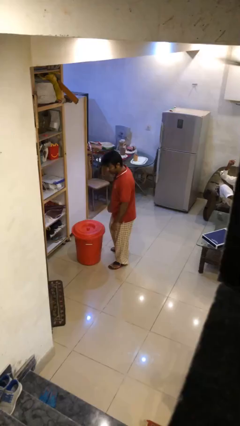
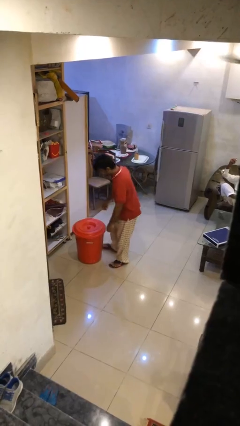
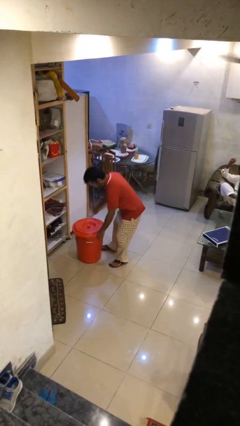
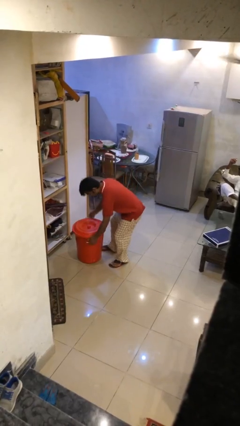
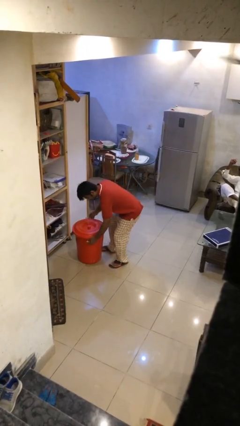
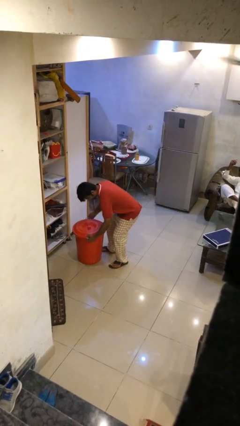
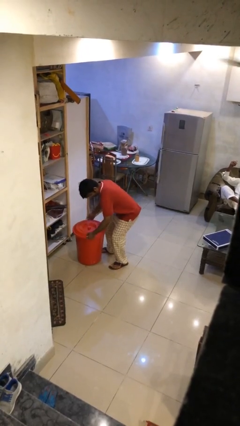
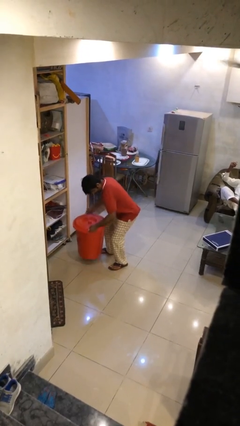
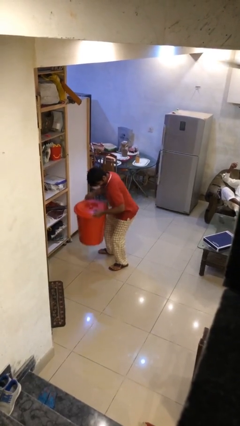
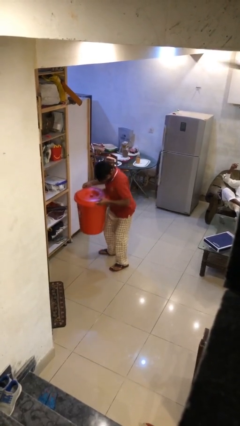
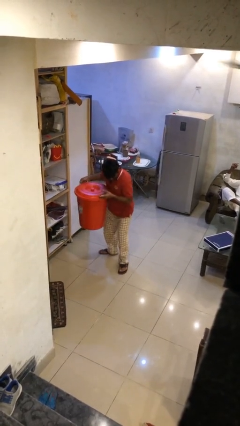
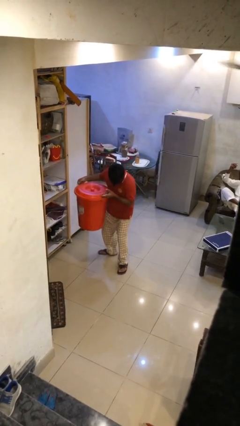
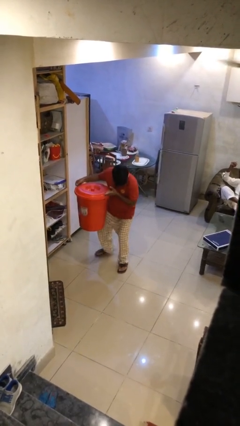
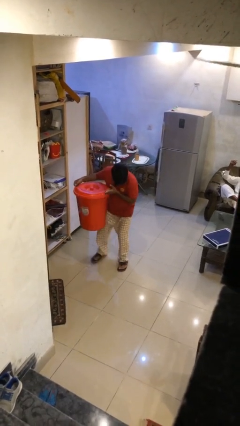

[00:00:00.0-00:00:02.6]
person picks up object from floor

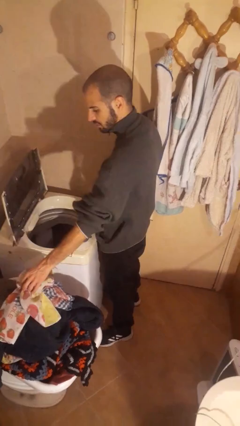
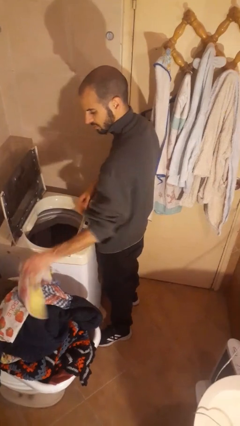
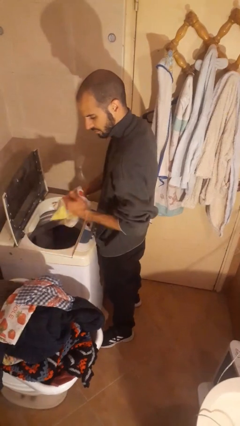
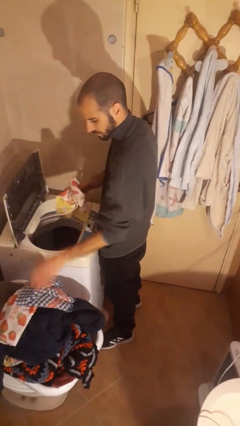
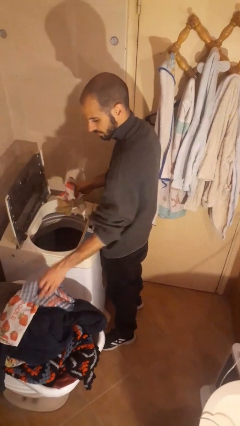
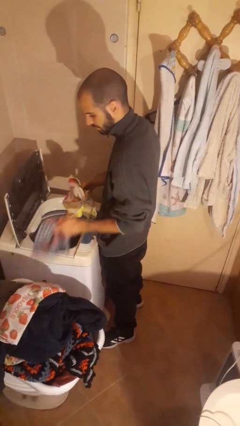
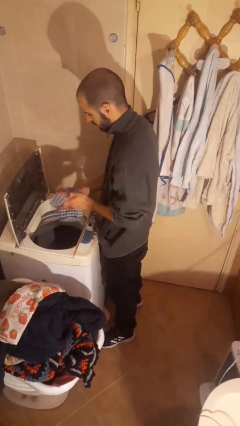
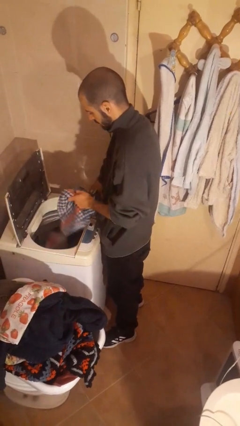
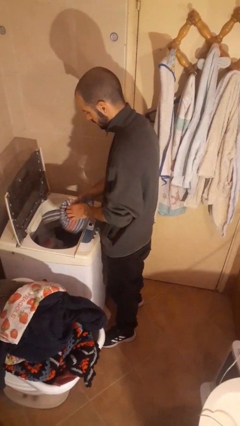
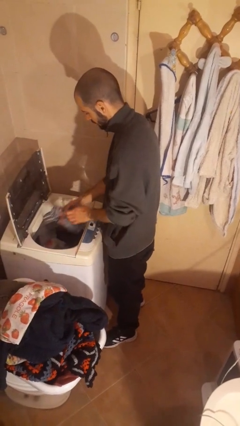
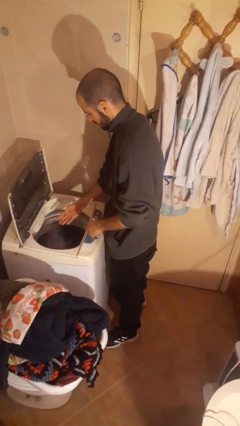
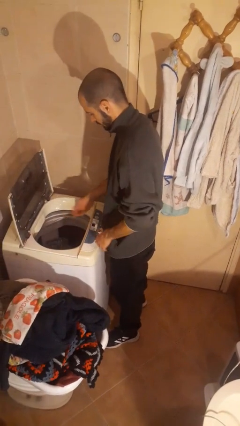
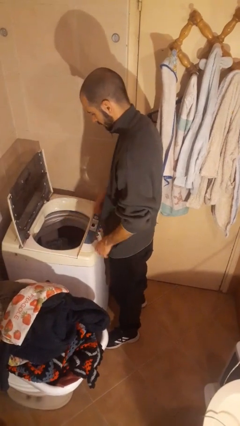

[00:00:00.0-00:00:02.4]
person unloads clotheswasher

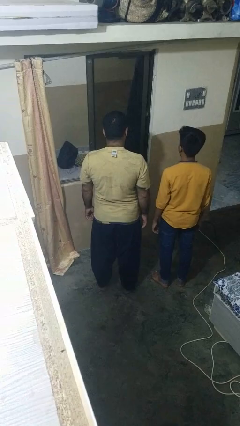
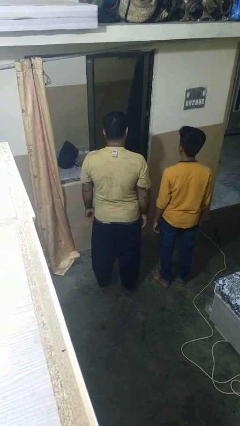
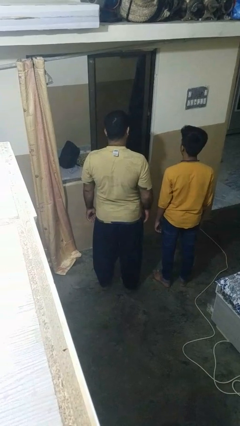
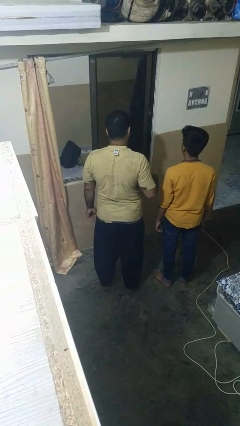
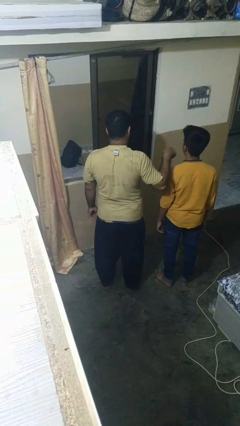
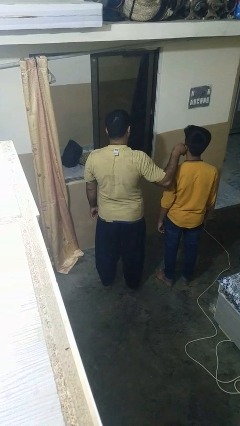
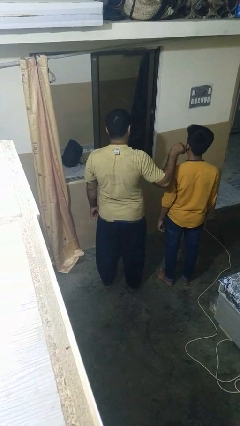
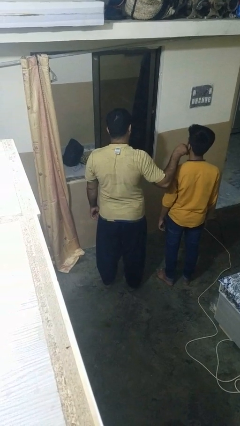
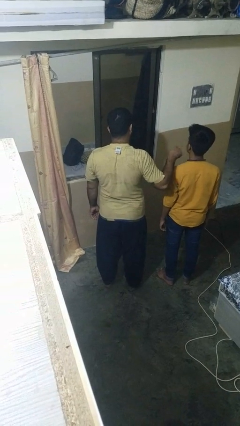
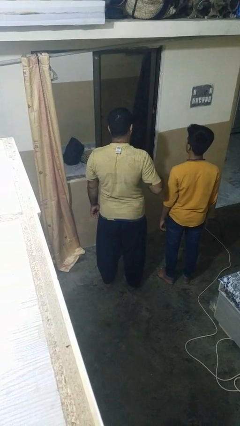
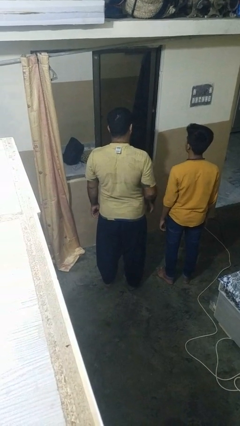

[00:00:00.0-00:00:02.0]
person touches face of person

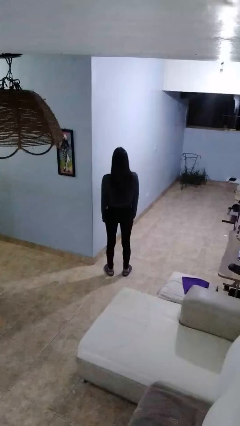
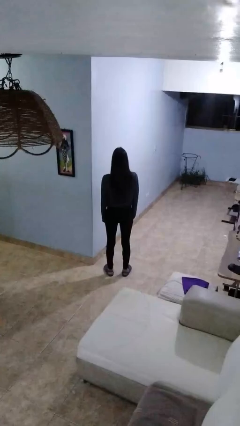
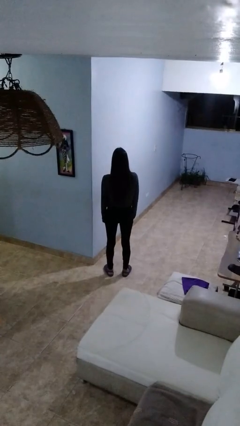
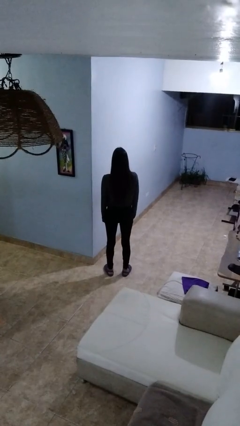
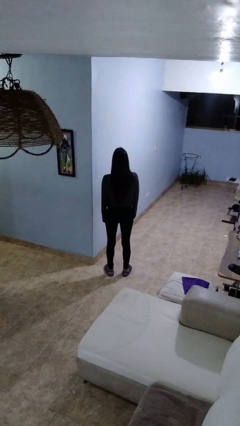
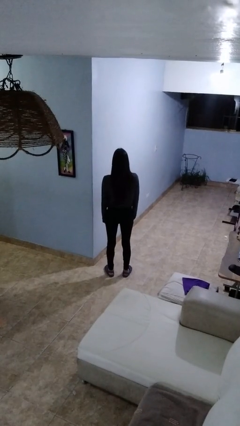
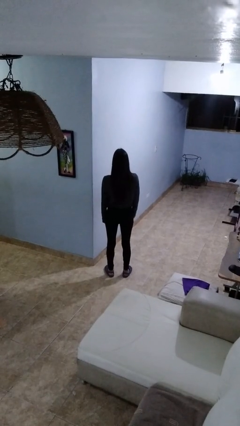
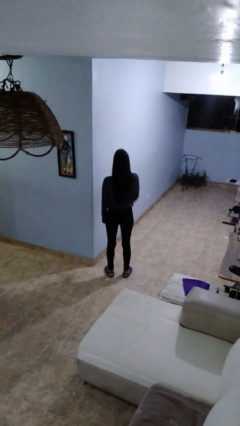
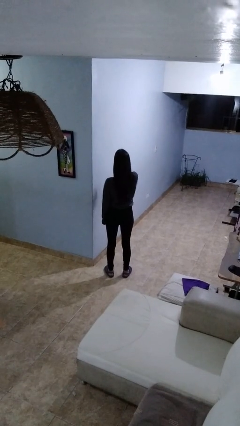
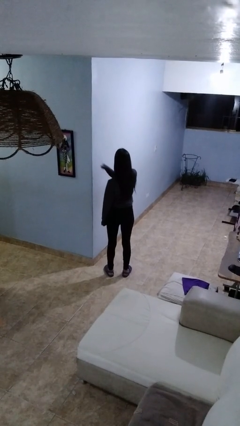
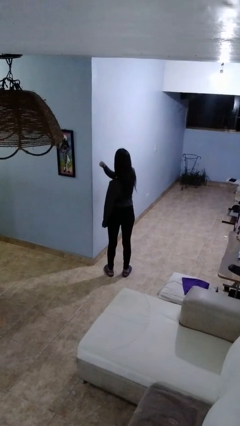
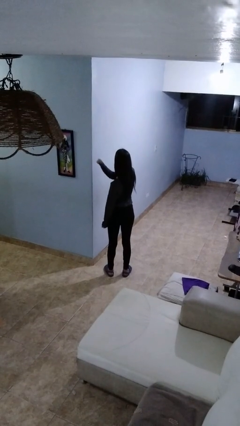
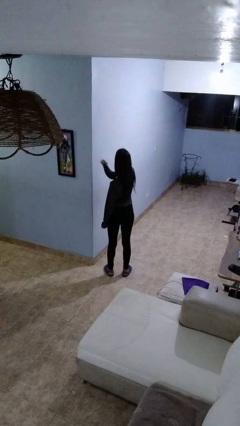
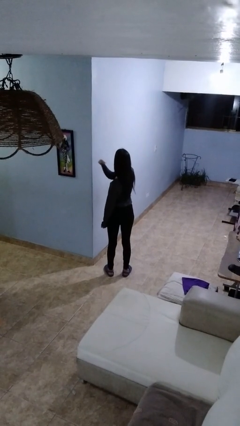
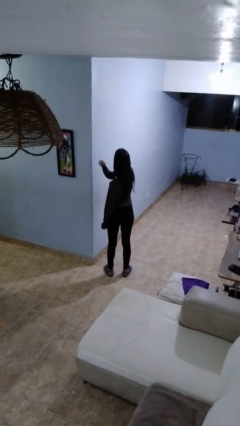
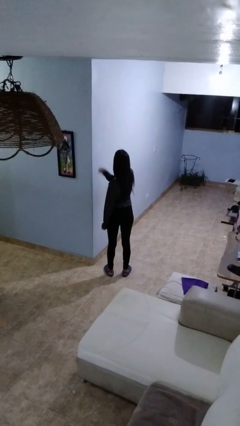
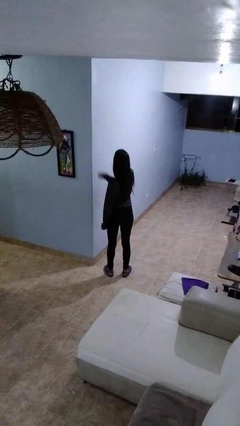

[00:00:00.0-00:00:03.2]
person gestures behind me

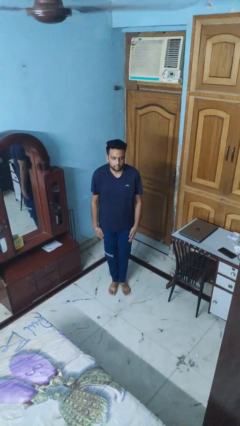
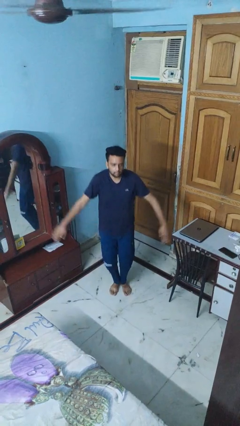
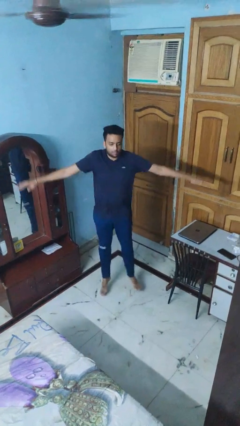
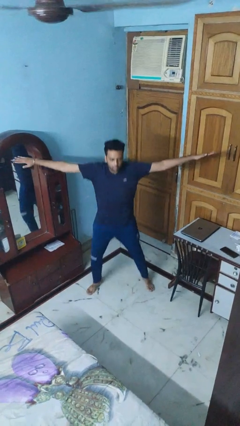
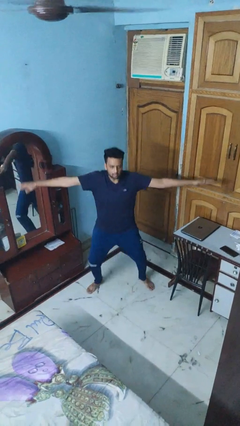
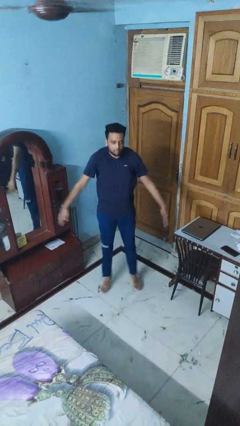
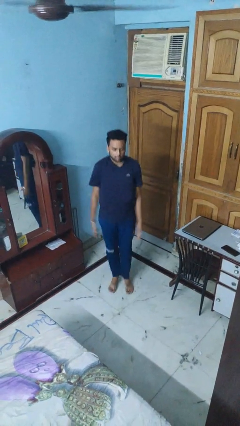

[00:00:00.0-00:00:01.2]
person exercises with jumping jacks

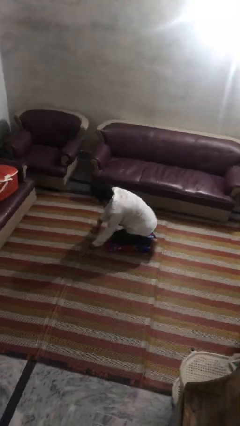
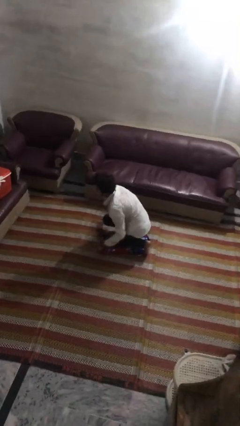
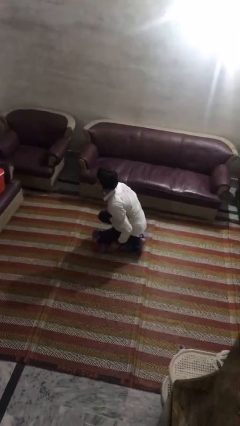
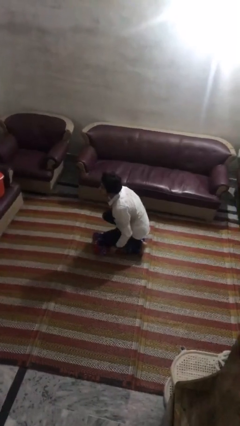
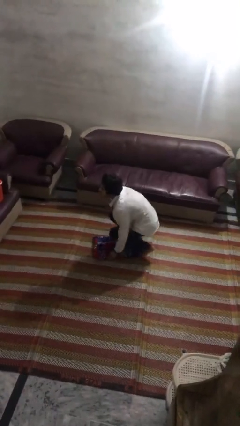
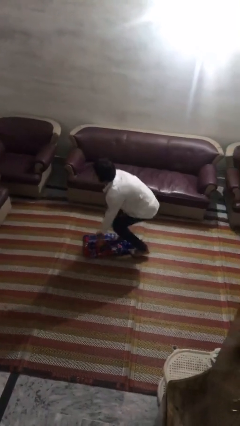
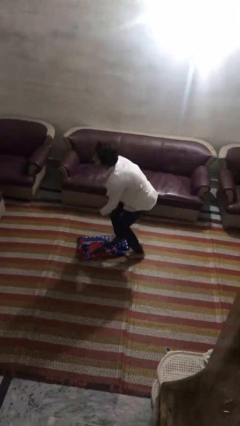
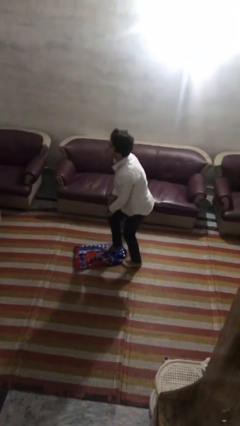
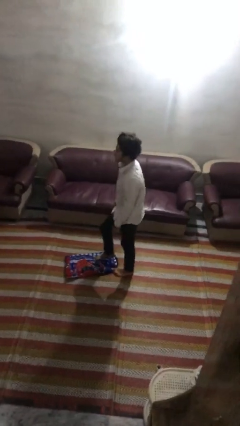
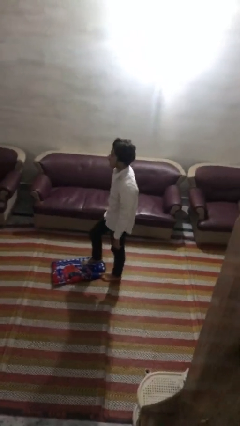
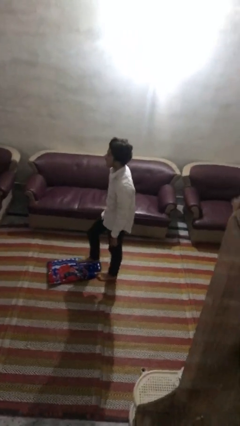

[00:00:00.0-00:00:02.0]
person stands up from floor

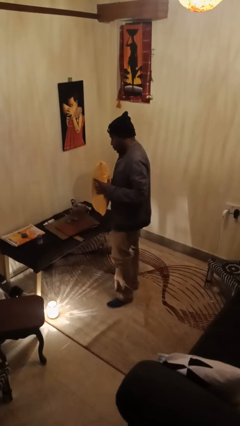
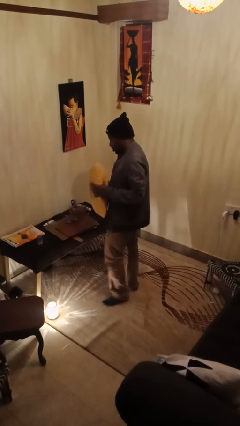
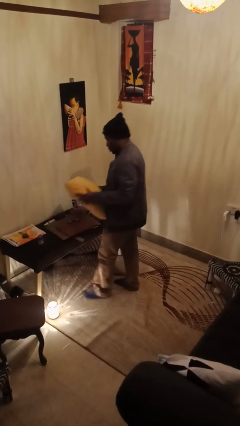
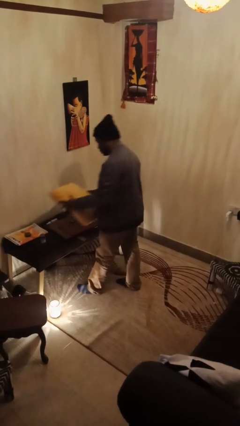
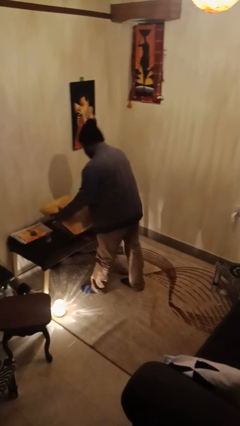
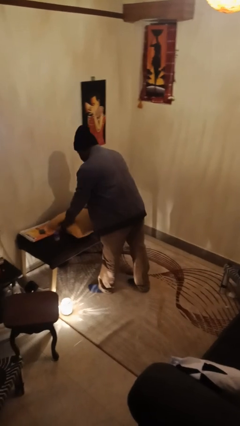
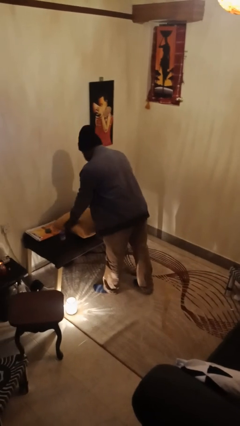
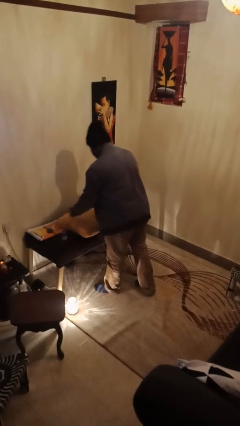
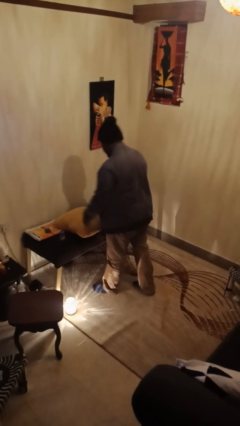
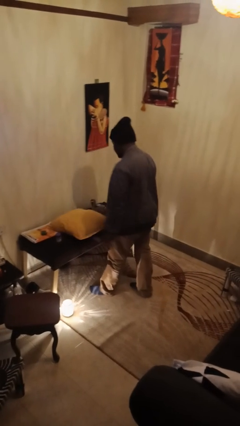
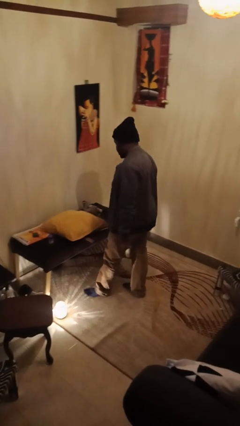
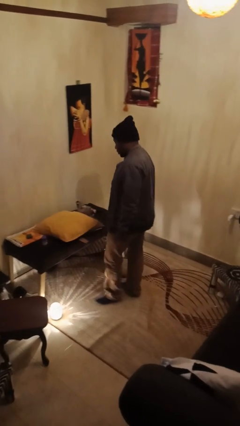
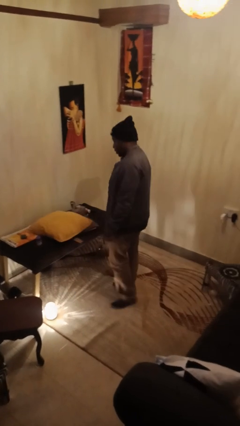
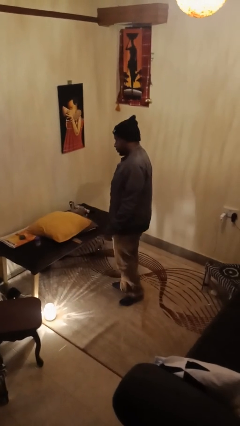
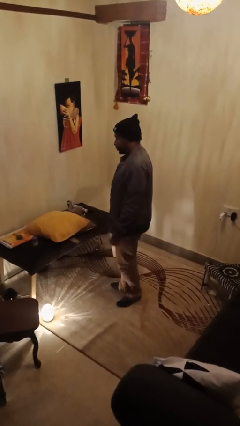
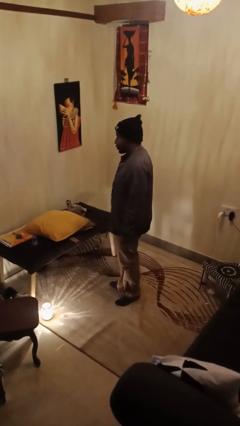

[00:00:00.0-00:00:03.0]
person puts down object on countertop

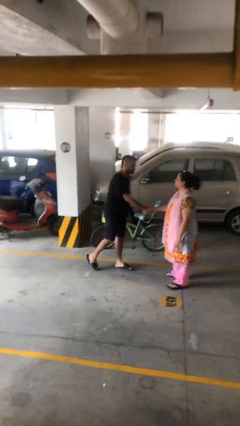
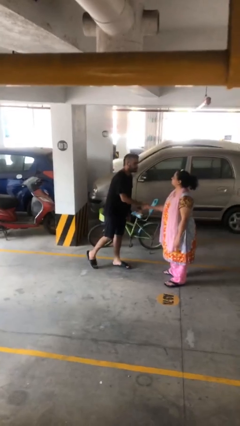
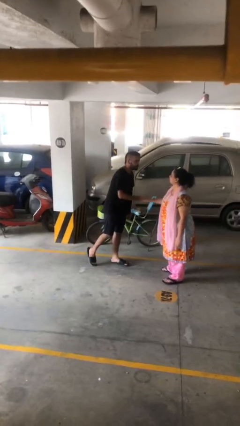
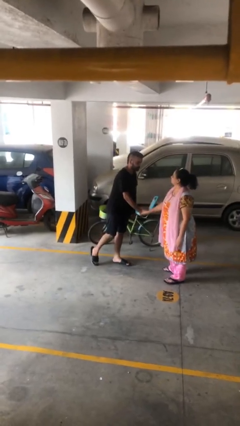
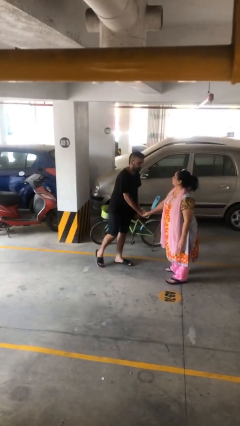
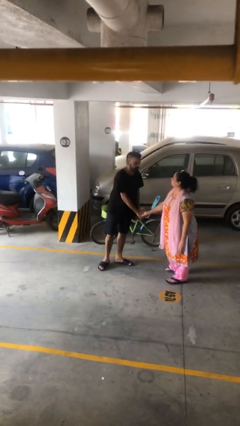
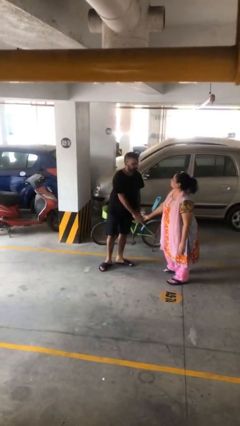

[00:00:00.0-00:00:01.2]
person shakes hand
